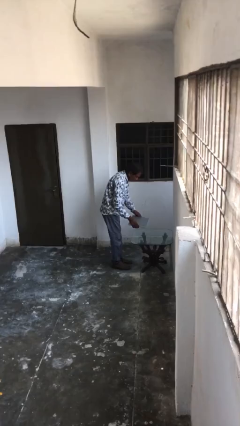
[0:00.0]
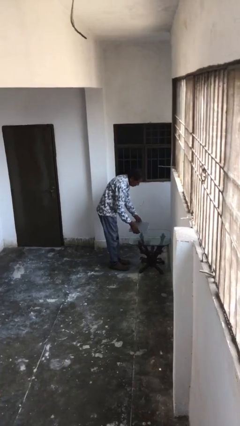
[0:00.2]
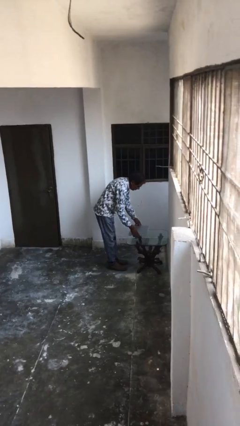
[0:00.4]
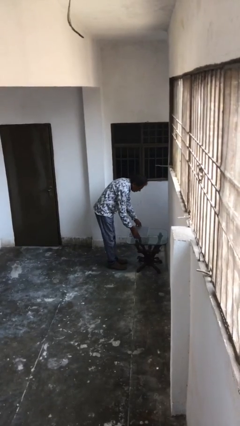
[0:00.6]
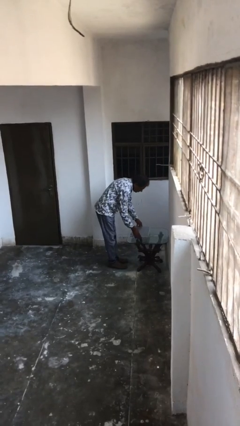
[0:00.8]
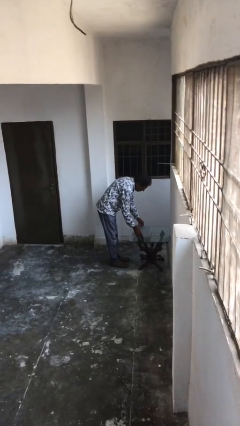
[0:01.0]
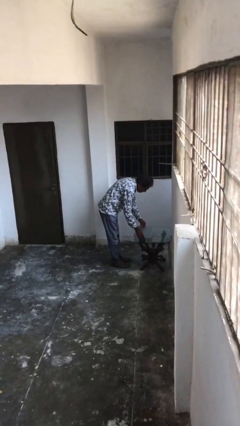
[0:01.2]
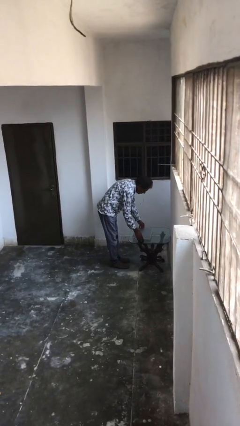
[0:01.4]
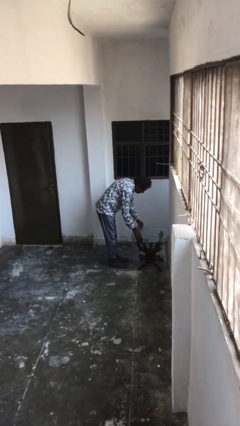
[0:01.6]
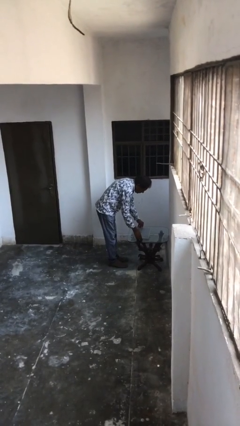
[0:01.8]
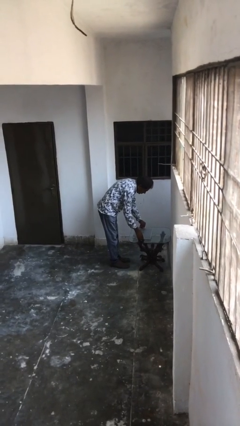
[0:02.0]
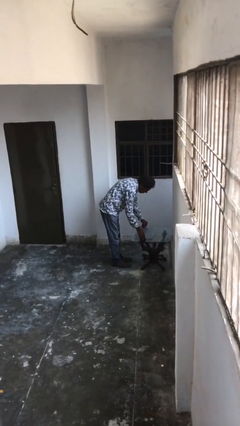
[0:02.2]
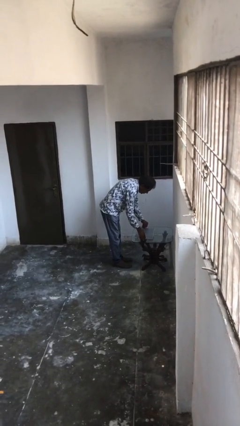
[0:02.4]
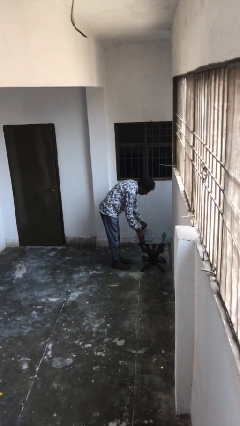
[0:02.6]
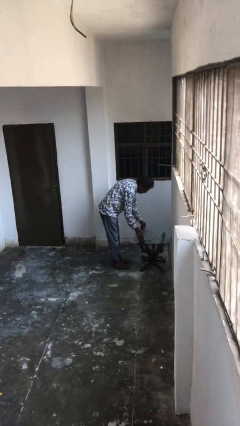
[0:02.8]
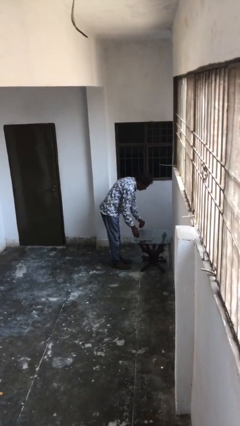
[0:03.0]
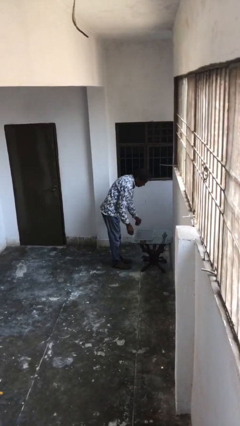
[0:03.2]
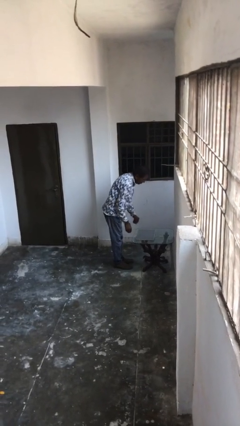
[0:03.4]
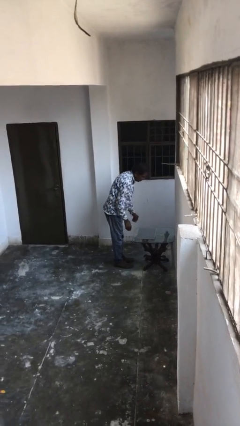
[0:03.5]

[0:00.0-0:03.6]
person puts down object on table

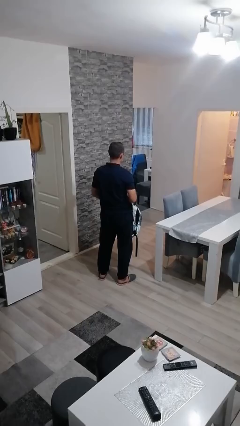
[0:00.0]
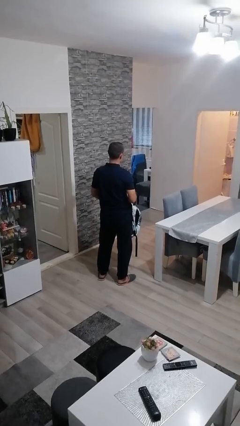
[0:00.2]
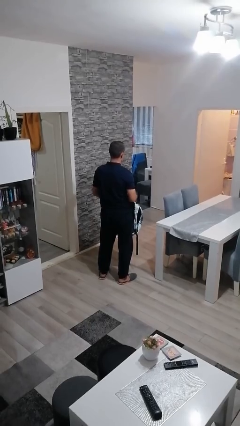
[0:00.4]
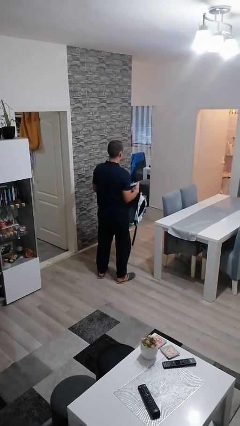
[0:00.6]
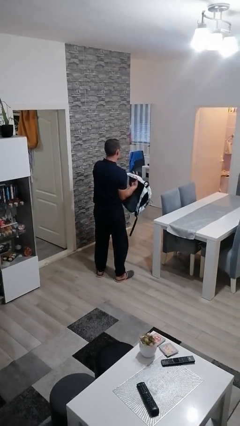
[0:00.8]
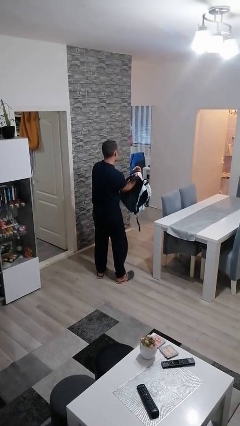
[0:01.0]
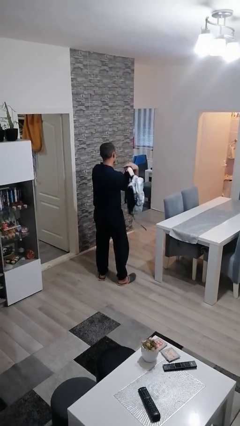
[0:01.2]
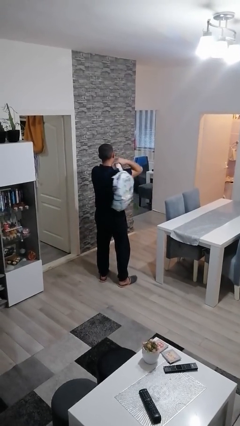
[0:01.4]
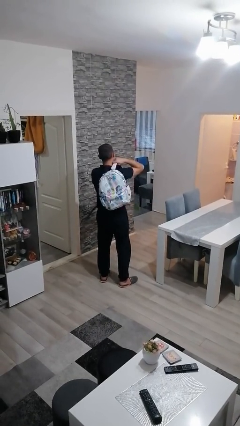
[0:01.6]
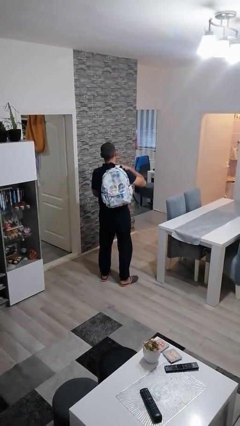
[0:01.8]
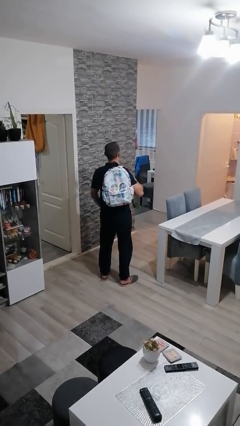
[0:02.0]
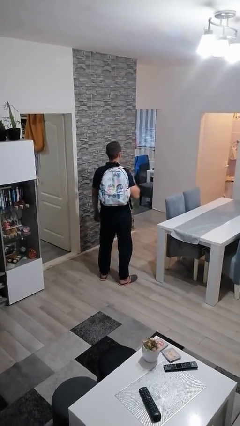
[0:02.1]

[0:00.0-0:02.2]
person puts on backpack

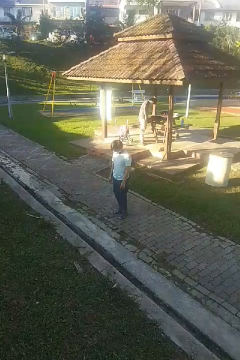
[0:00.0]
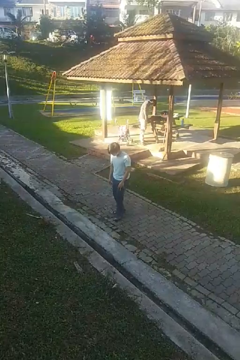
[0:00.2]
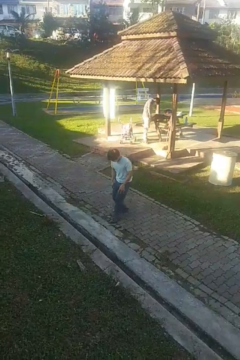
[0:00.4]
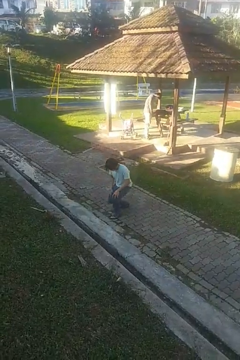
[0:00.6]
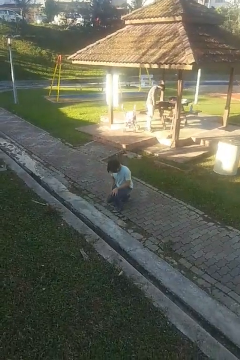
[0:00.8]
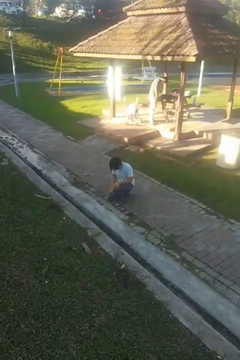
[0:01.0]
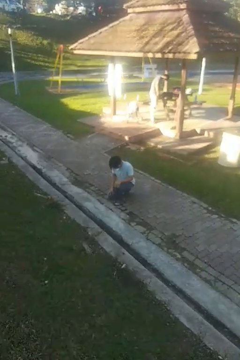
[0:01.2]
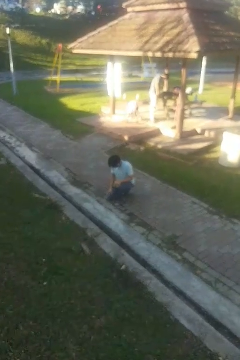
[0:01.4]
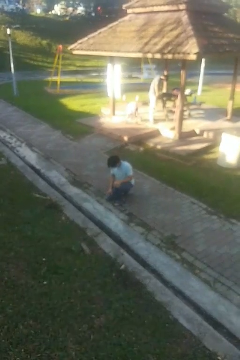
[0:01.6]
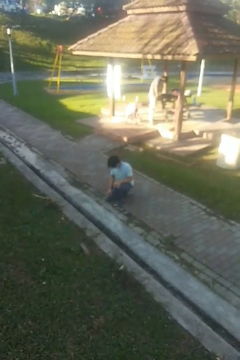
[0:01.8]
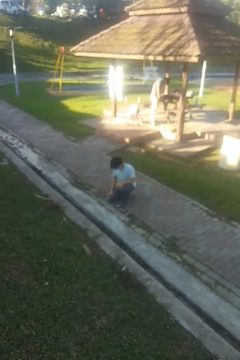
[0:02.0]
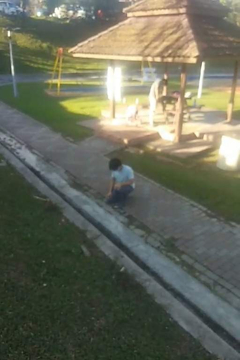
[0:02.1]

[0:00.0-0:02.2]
person kneels

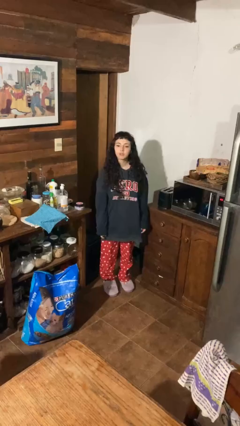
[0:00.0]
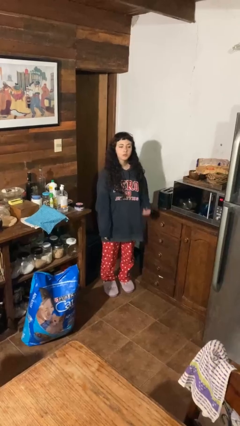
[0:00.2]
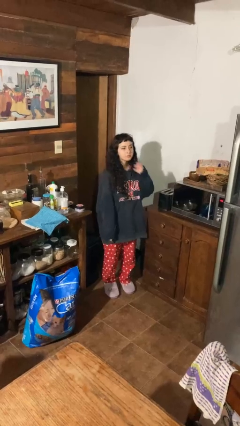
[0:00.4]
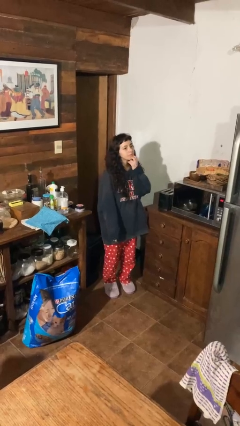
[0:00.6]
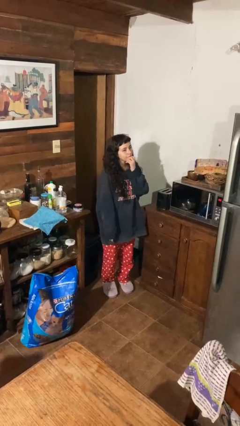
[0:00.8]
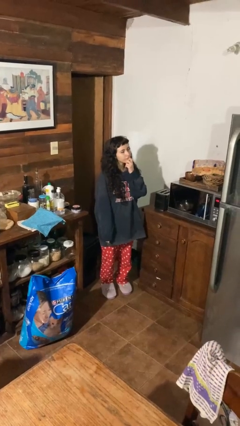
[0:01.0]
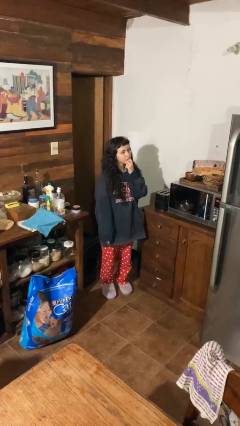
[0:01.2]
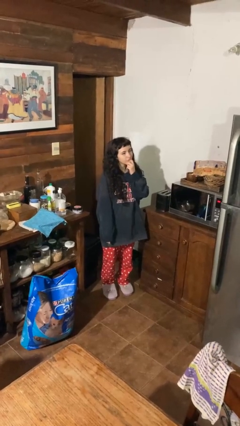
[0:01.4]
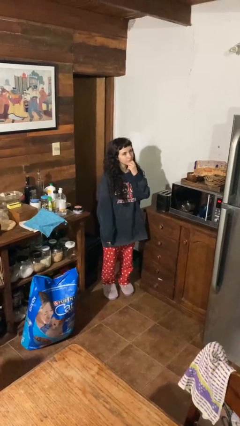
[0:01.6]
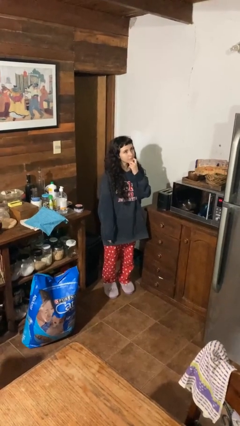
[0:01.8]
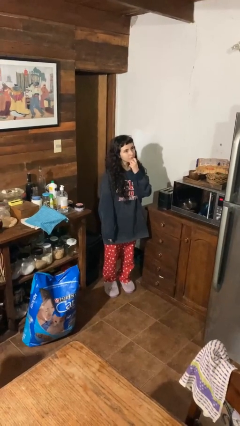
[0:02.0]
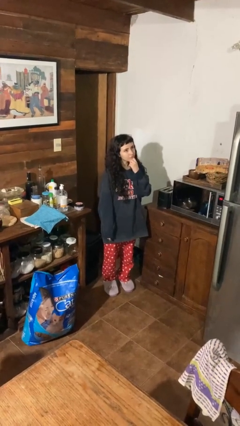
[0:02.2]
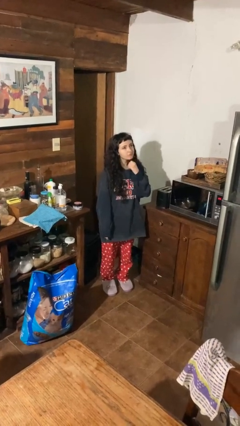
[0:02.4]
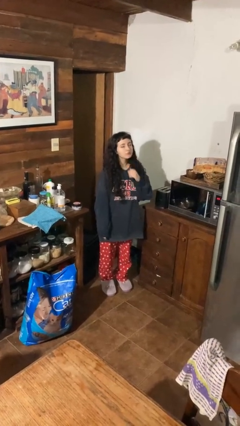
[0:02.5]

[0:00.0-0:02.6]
person strokes chin

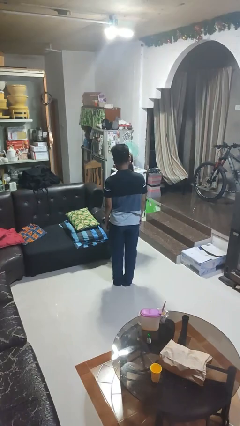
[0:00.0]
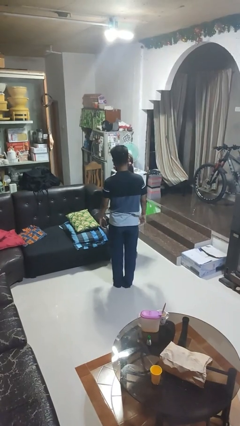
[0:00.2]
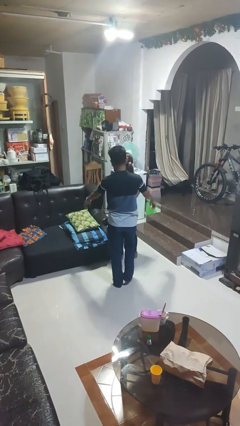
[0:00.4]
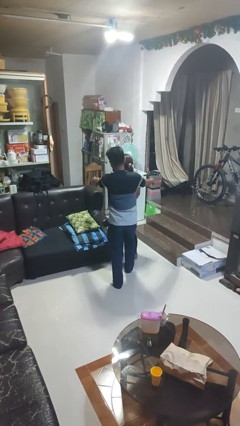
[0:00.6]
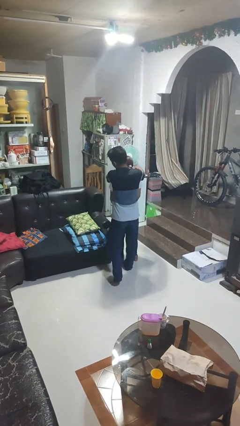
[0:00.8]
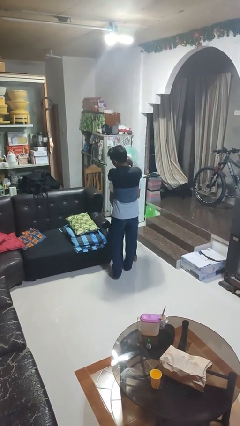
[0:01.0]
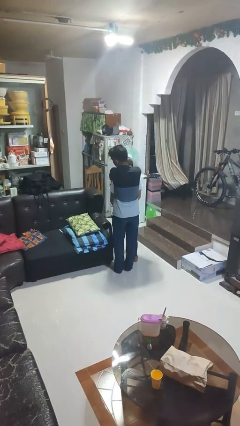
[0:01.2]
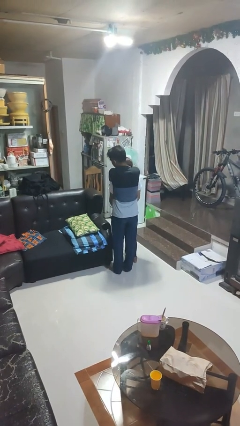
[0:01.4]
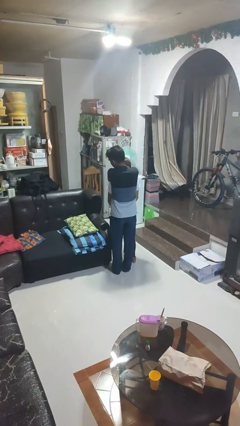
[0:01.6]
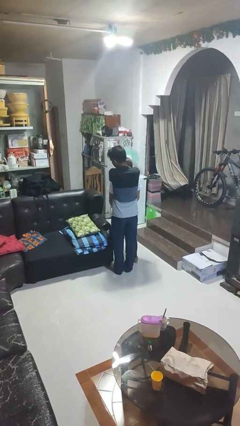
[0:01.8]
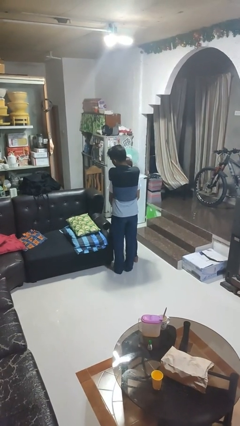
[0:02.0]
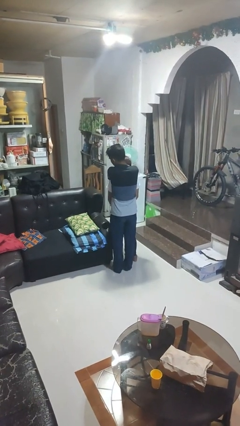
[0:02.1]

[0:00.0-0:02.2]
person hugs person from behind

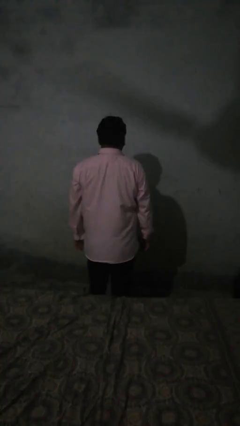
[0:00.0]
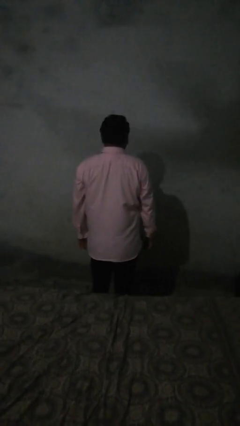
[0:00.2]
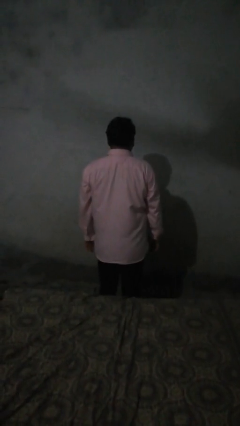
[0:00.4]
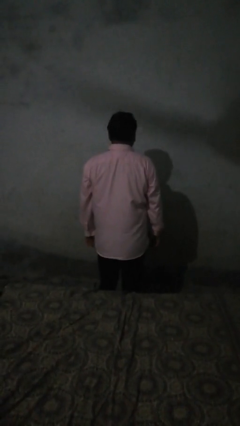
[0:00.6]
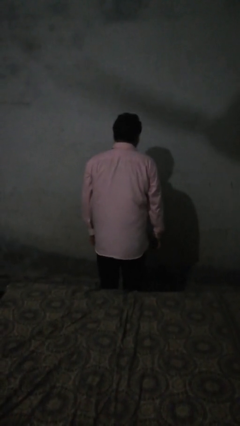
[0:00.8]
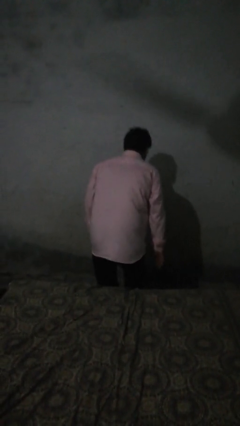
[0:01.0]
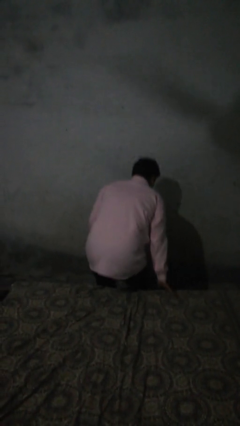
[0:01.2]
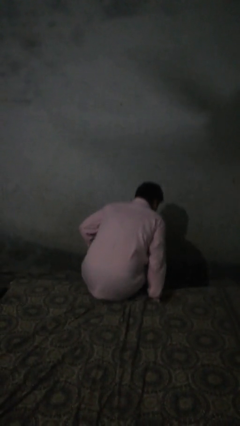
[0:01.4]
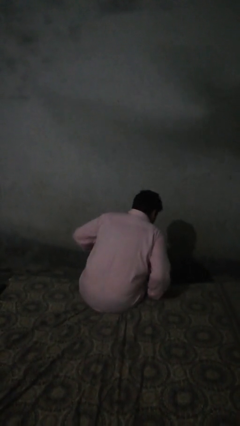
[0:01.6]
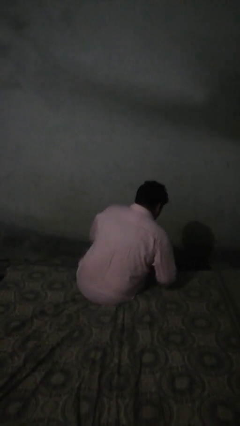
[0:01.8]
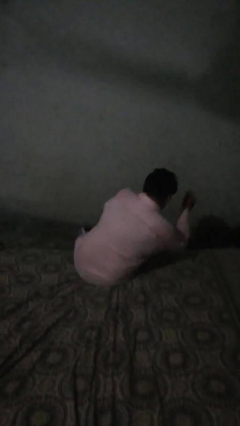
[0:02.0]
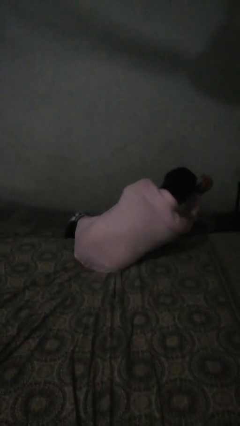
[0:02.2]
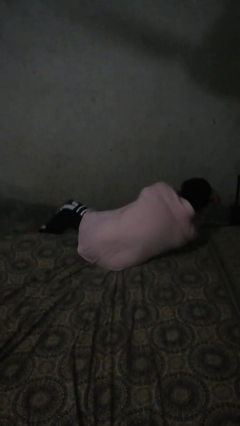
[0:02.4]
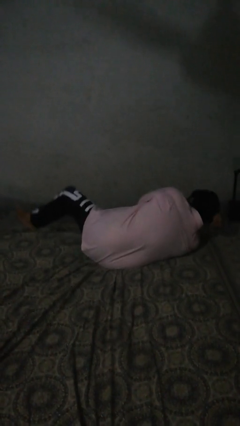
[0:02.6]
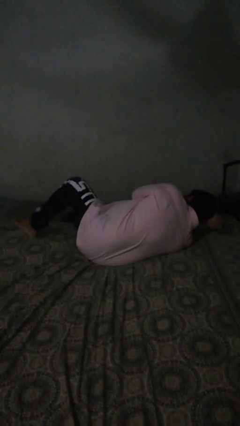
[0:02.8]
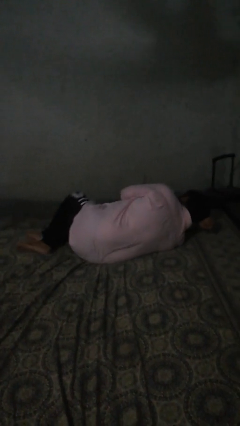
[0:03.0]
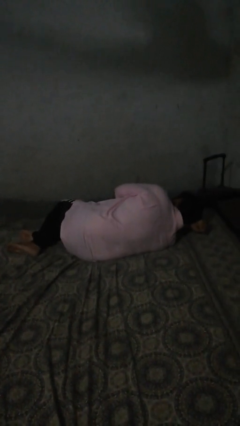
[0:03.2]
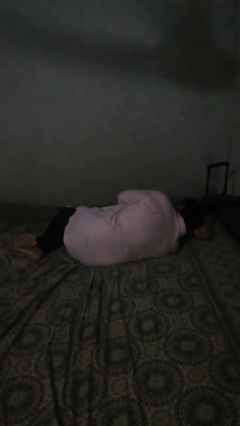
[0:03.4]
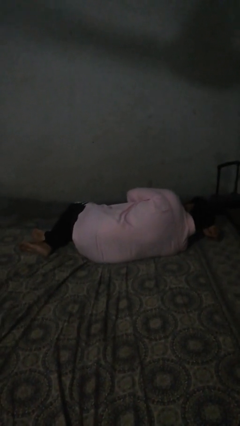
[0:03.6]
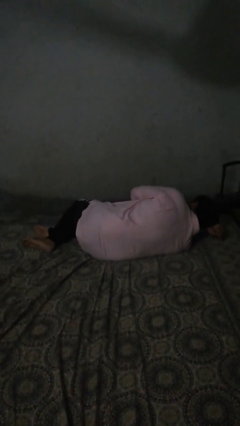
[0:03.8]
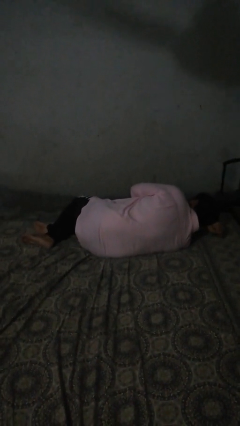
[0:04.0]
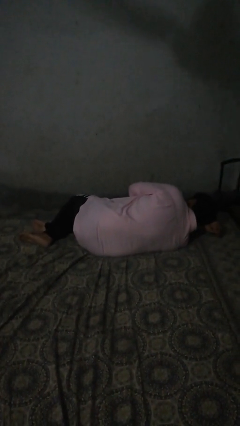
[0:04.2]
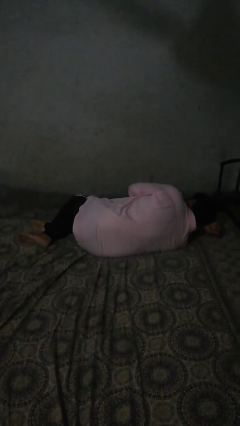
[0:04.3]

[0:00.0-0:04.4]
person lies down on bed

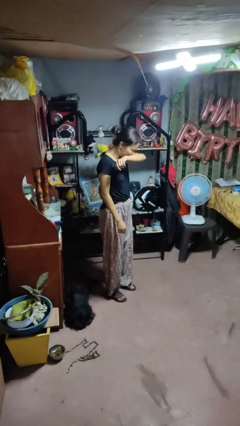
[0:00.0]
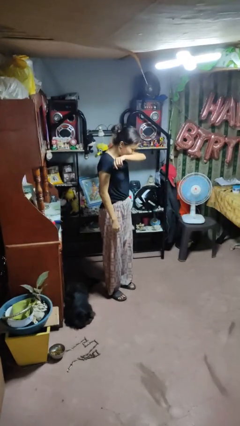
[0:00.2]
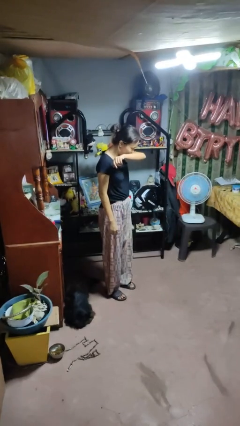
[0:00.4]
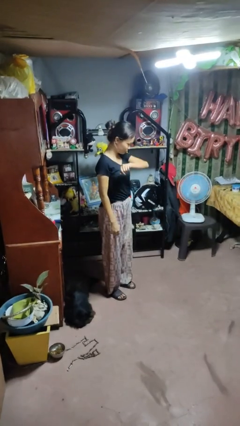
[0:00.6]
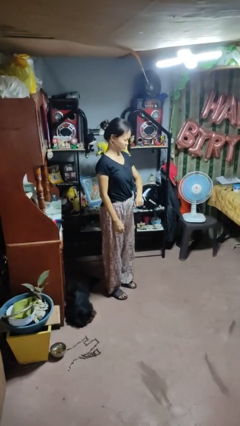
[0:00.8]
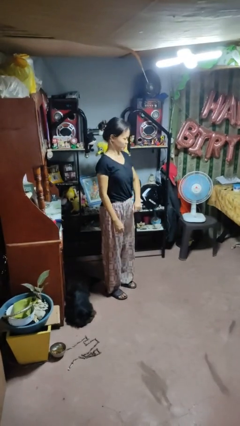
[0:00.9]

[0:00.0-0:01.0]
person sneezes into arm
